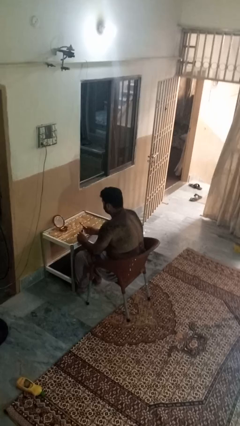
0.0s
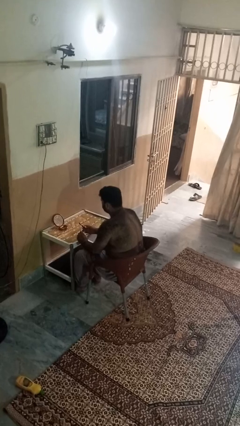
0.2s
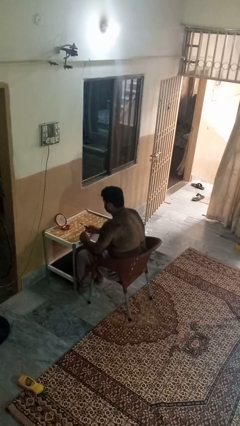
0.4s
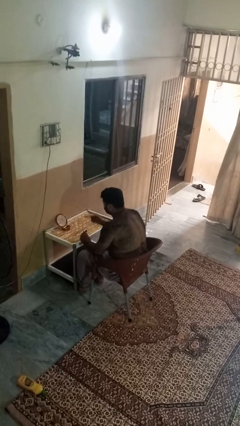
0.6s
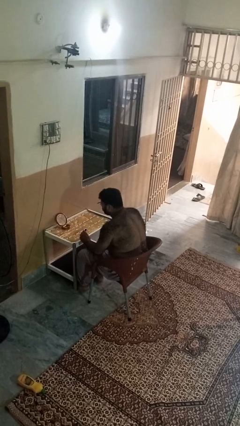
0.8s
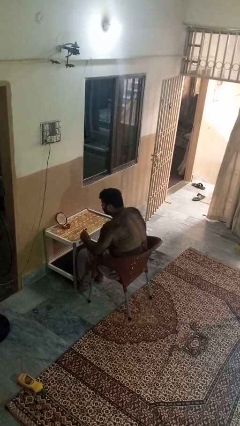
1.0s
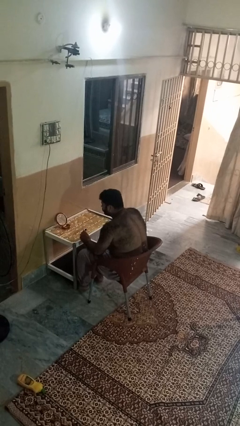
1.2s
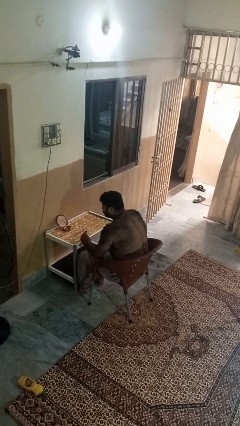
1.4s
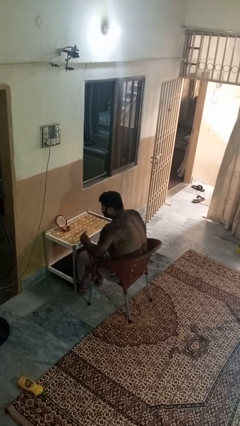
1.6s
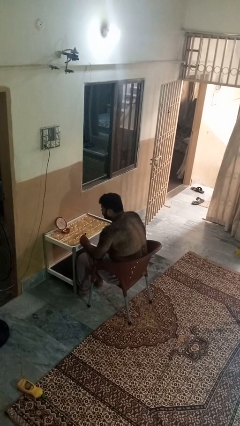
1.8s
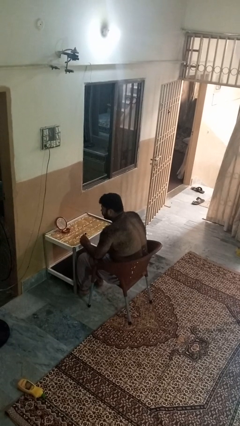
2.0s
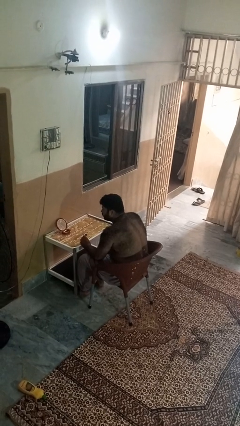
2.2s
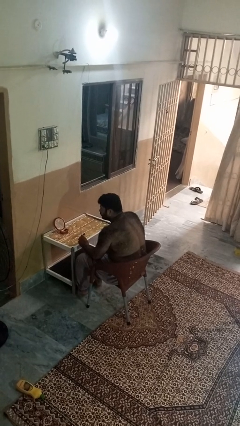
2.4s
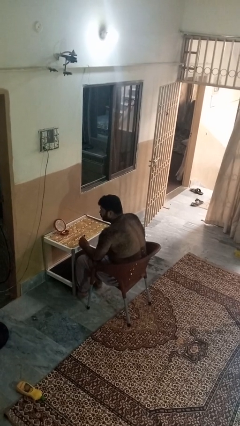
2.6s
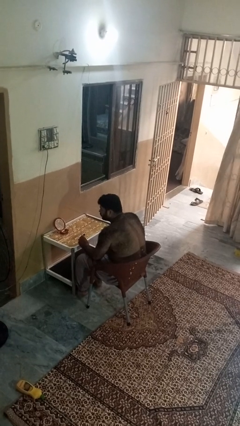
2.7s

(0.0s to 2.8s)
person applies eye makeup

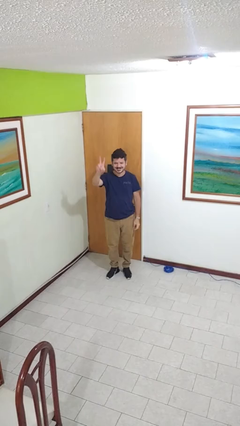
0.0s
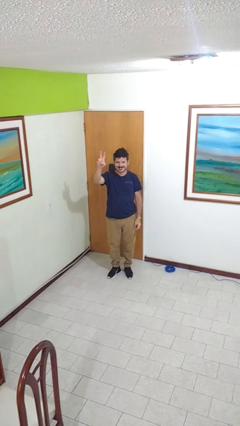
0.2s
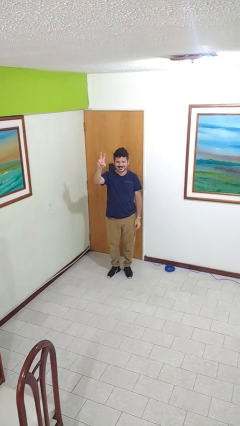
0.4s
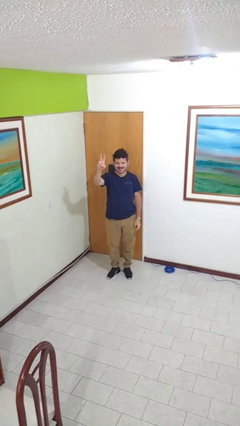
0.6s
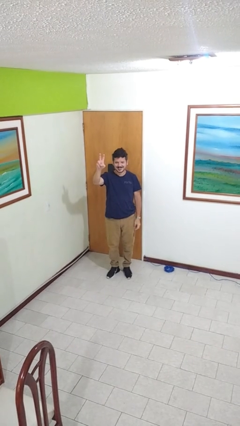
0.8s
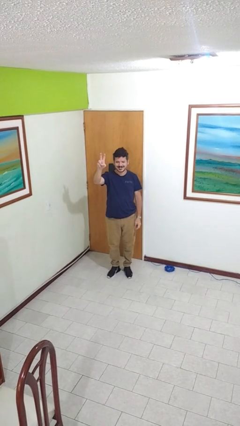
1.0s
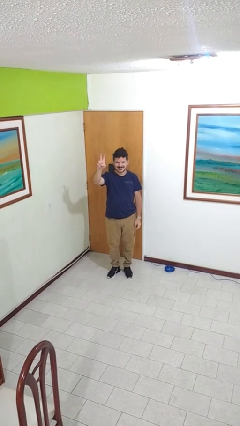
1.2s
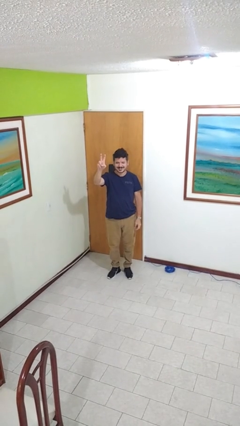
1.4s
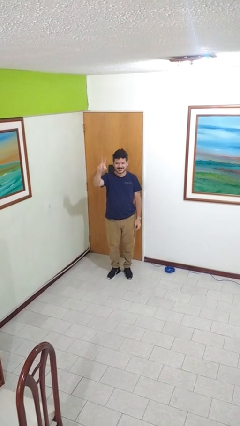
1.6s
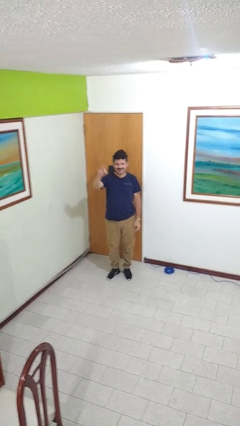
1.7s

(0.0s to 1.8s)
person gestures peace

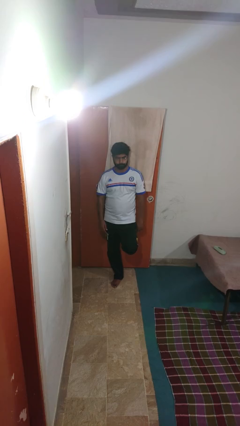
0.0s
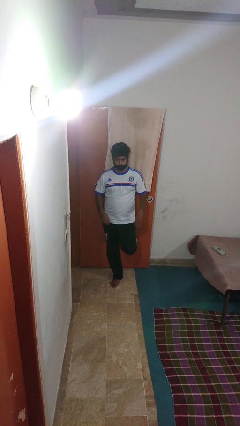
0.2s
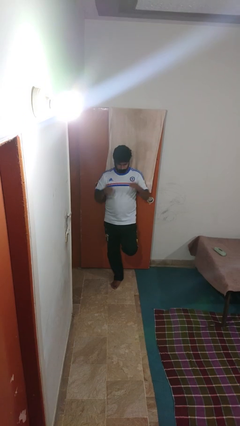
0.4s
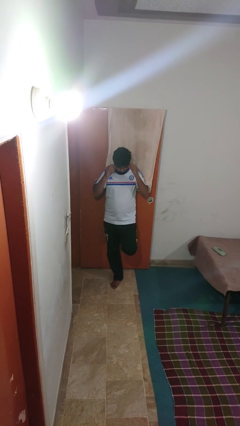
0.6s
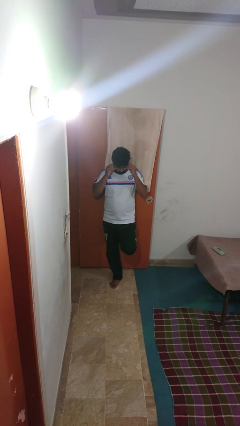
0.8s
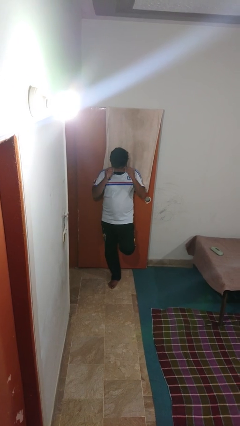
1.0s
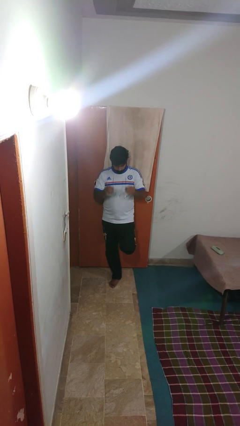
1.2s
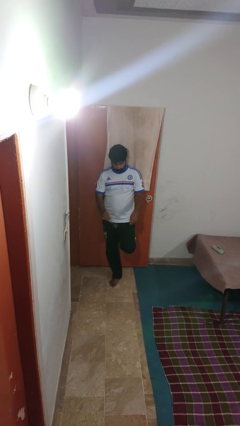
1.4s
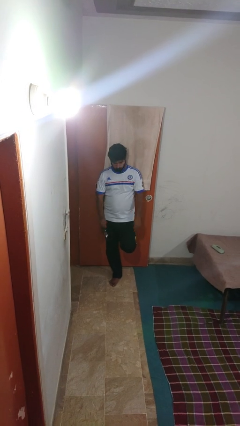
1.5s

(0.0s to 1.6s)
person takes off glasses

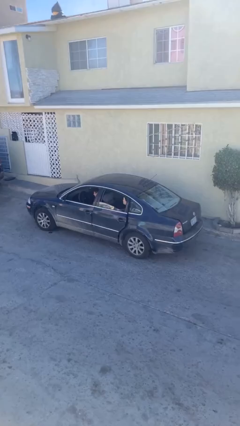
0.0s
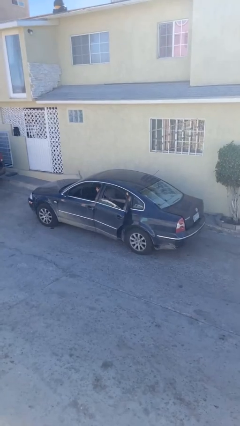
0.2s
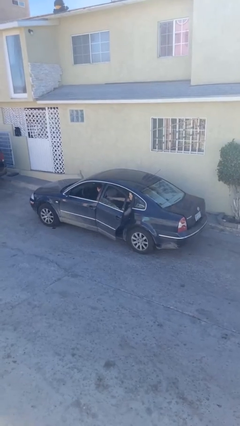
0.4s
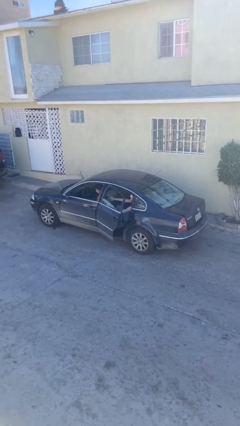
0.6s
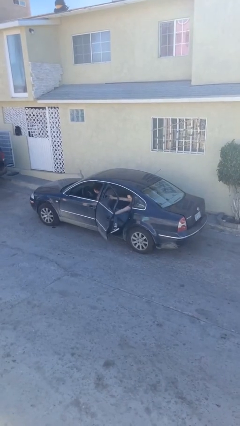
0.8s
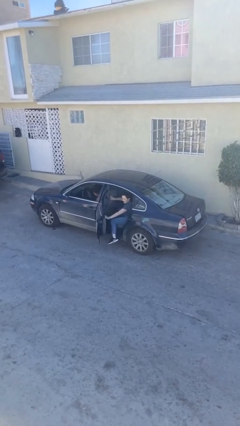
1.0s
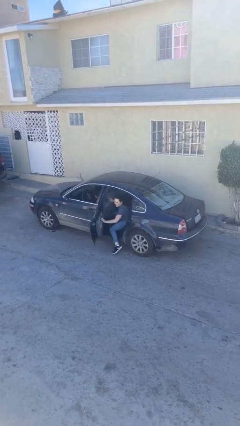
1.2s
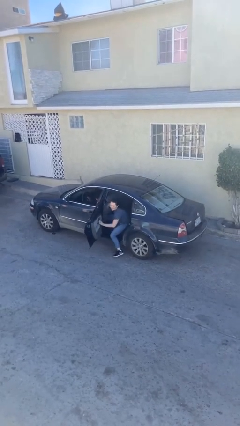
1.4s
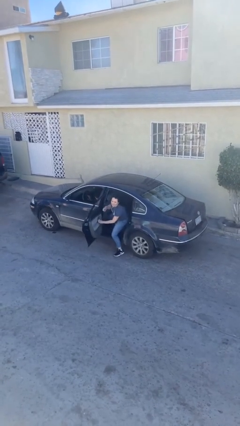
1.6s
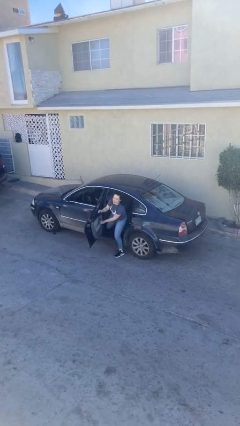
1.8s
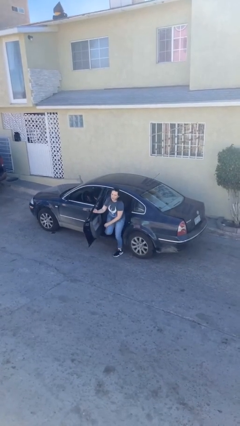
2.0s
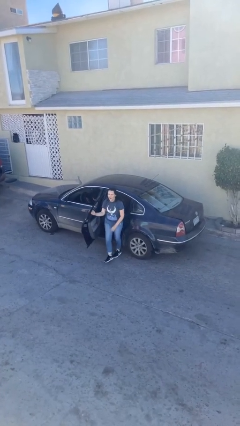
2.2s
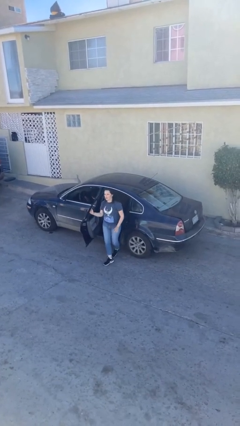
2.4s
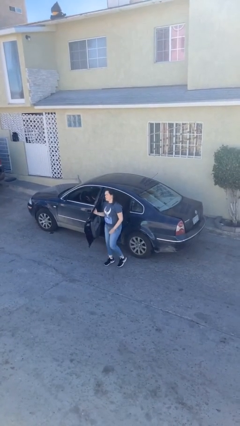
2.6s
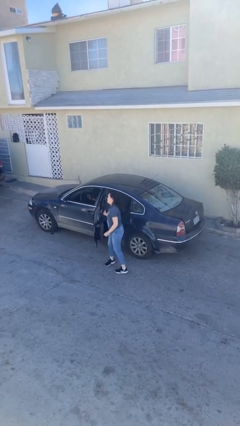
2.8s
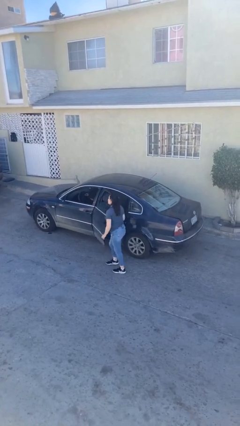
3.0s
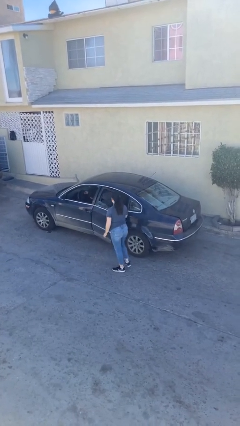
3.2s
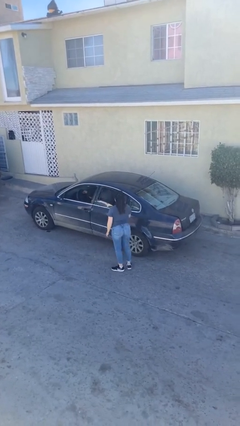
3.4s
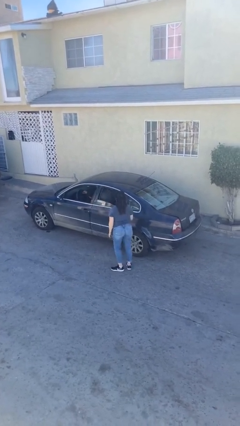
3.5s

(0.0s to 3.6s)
car drops off person

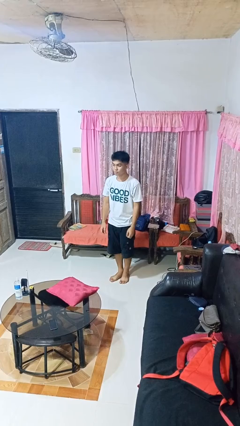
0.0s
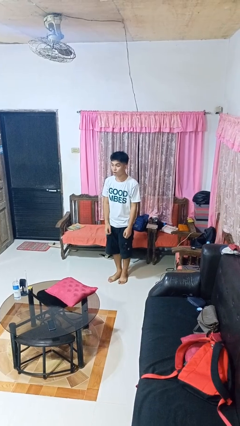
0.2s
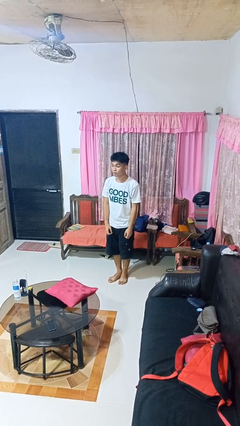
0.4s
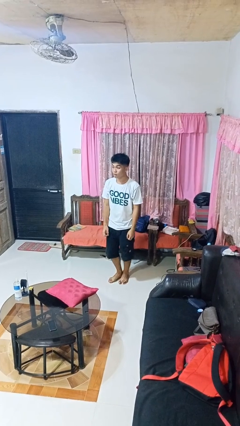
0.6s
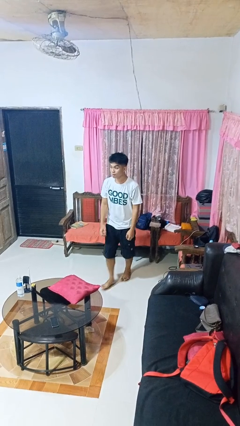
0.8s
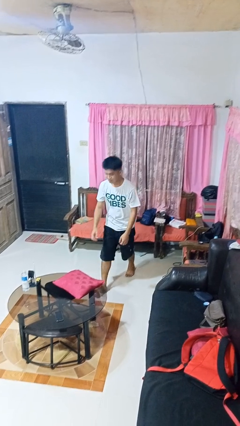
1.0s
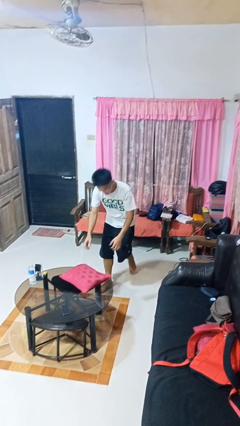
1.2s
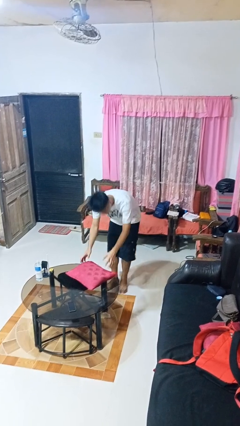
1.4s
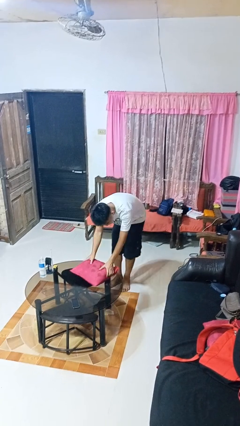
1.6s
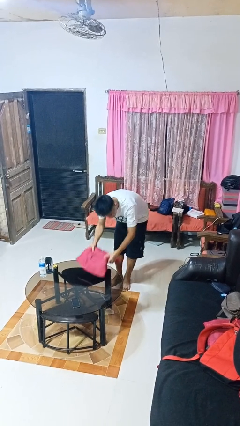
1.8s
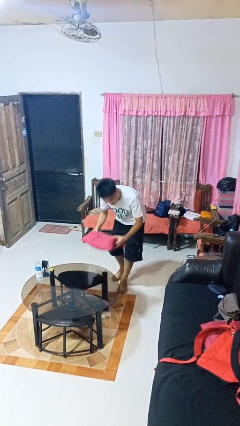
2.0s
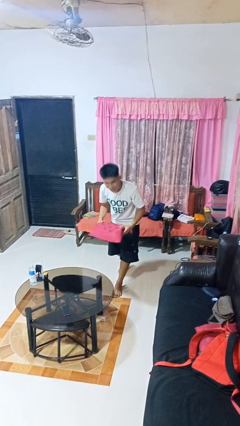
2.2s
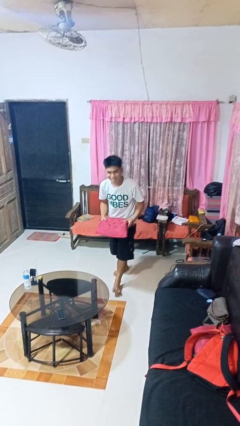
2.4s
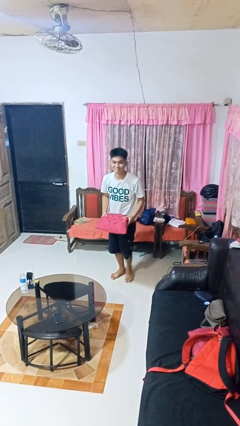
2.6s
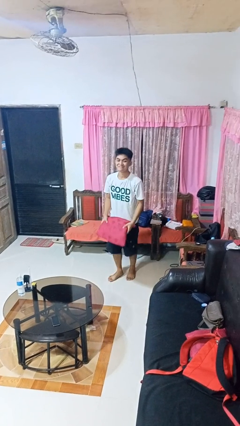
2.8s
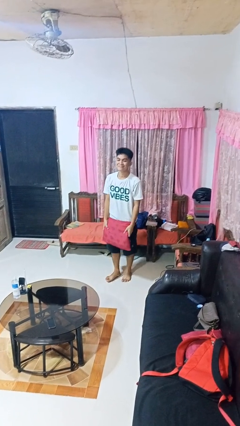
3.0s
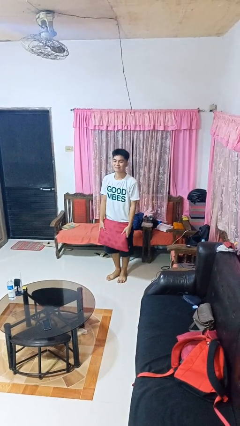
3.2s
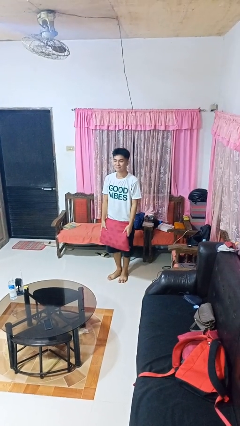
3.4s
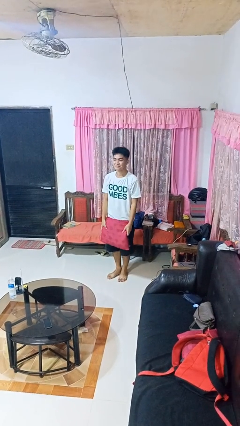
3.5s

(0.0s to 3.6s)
person picks up object from table

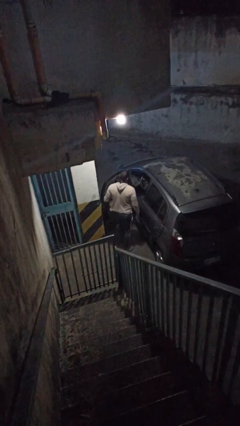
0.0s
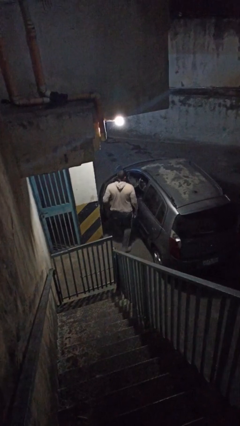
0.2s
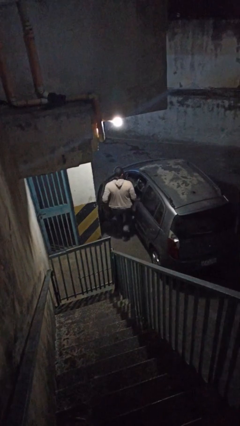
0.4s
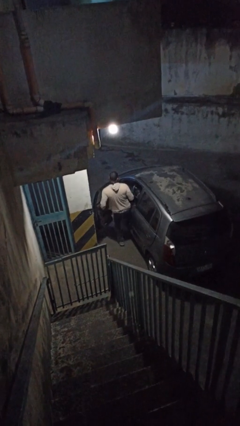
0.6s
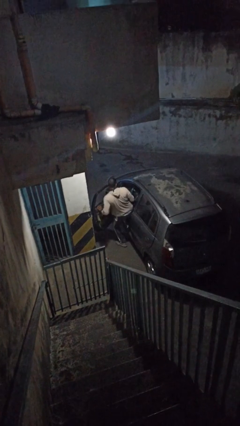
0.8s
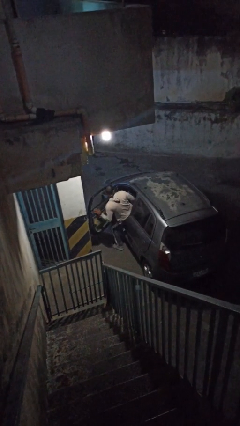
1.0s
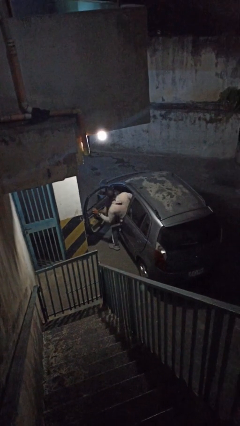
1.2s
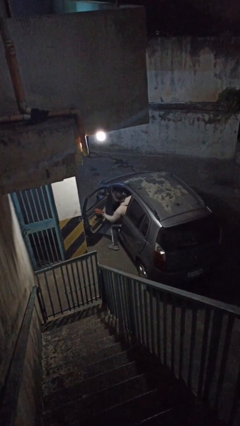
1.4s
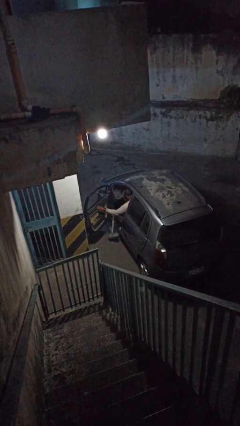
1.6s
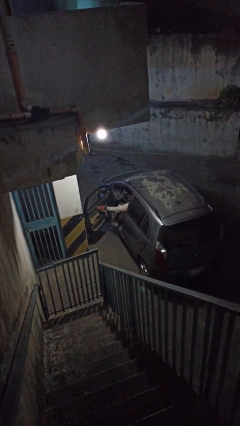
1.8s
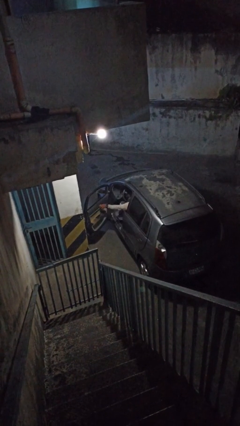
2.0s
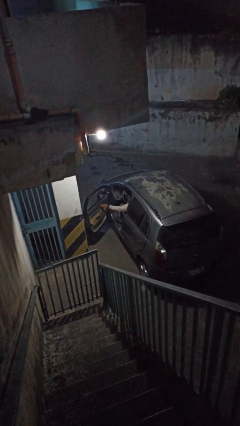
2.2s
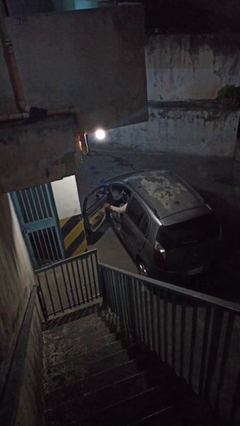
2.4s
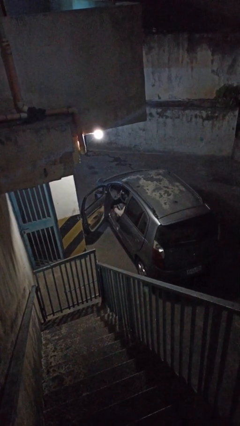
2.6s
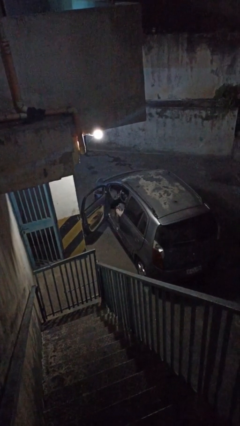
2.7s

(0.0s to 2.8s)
person enters car

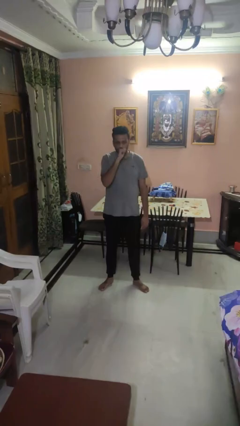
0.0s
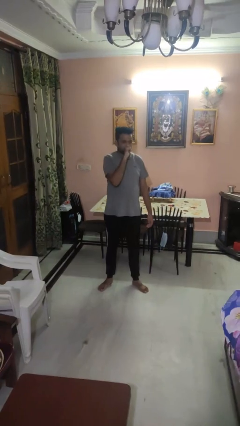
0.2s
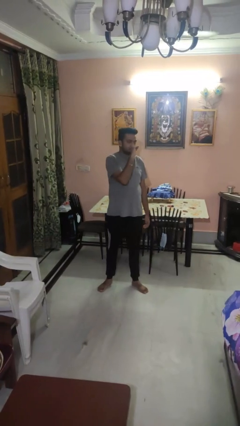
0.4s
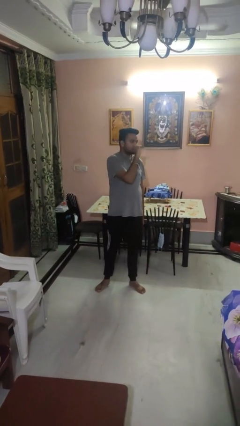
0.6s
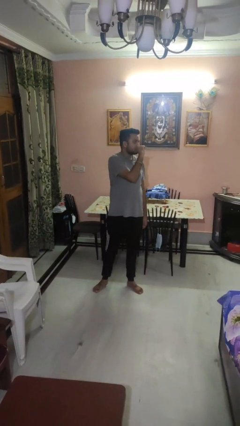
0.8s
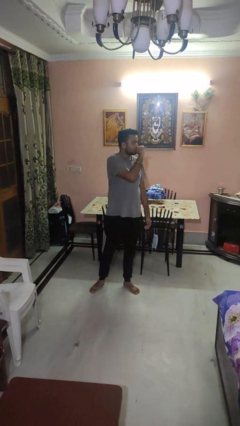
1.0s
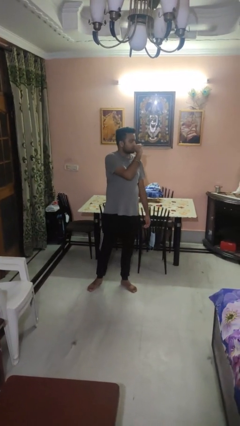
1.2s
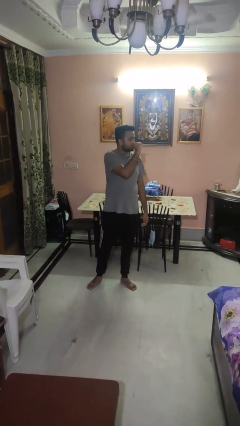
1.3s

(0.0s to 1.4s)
person vapes
